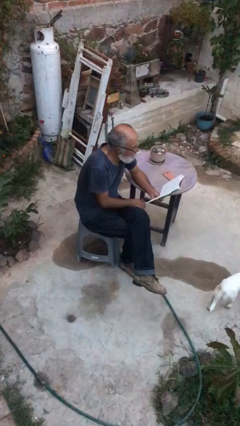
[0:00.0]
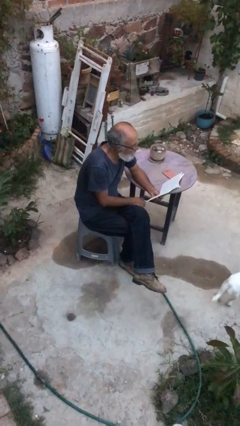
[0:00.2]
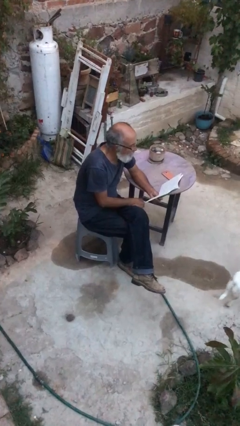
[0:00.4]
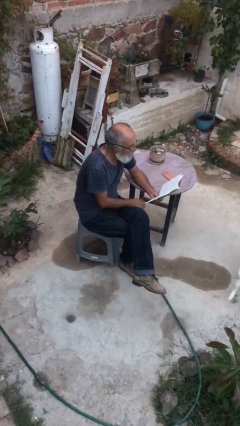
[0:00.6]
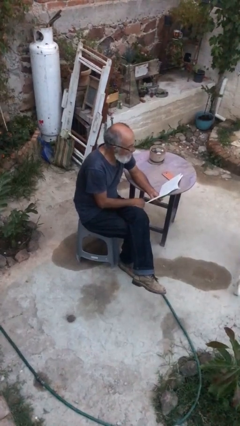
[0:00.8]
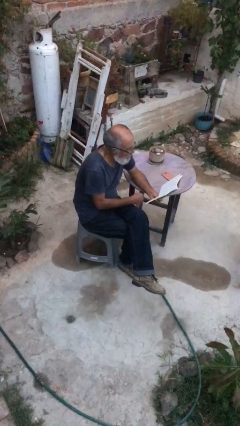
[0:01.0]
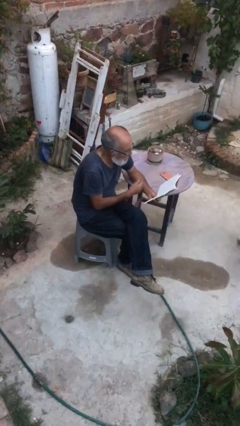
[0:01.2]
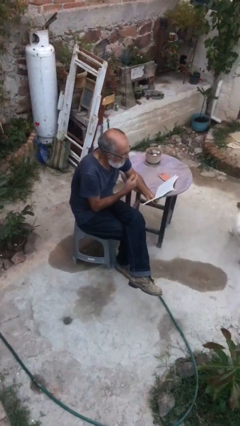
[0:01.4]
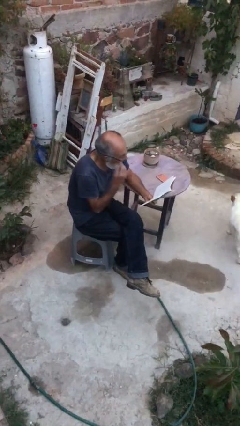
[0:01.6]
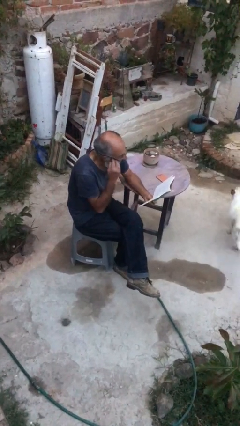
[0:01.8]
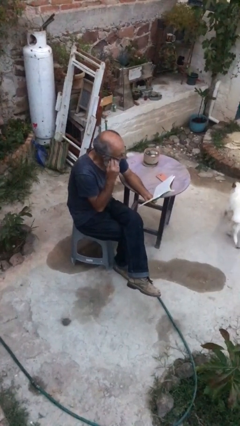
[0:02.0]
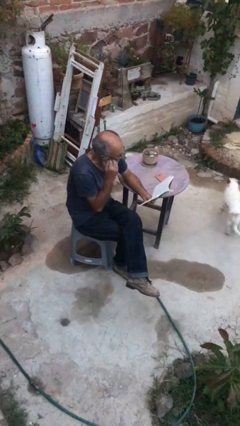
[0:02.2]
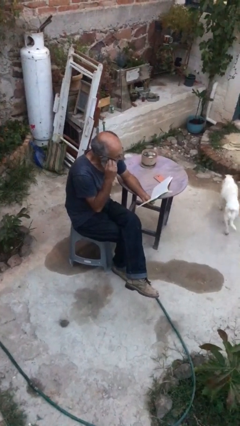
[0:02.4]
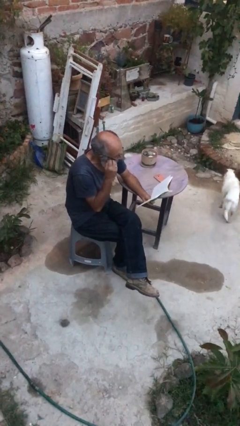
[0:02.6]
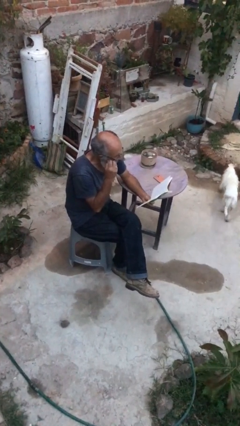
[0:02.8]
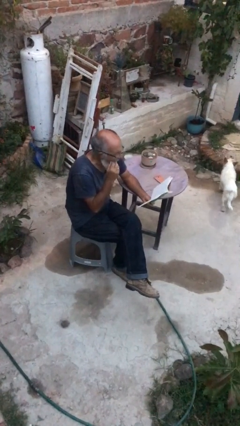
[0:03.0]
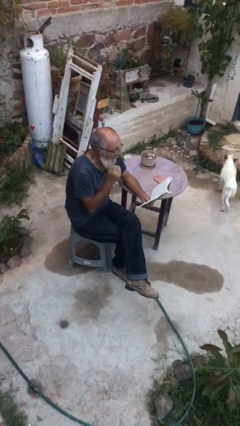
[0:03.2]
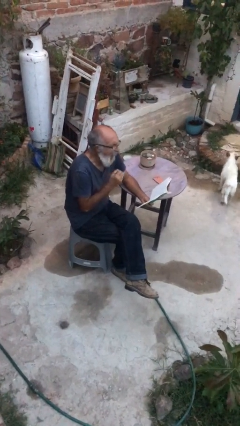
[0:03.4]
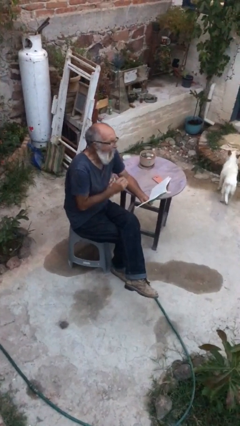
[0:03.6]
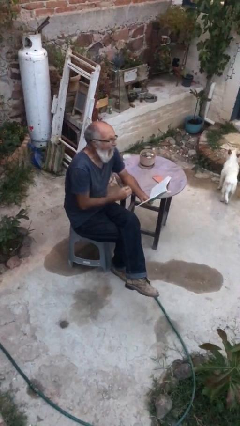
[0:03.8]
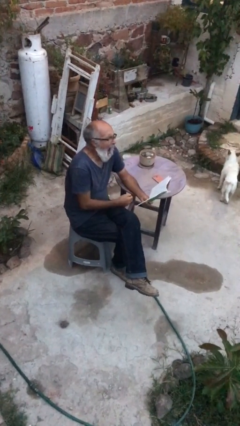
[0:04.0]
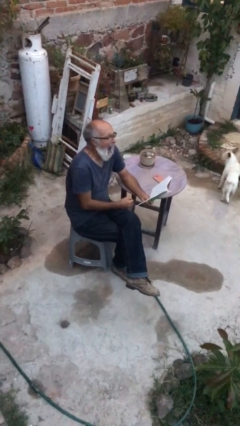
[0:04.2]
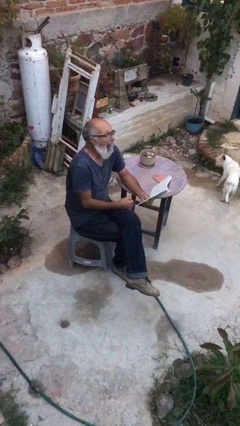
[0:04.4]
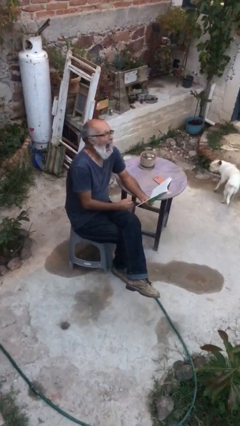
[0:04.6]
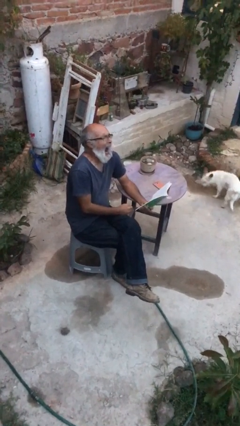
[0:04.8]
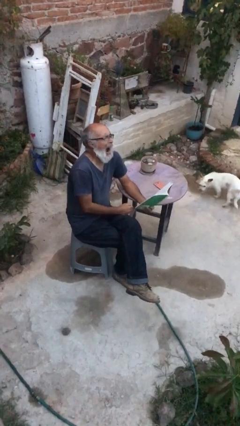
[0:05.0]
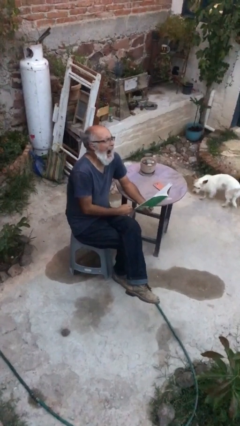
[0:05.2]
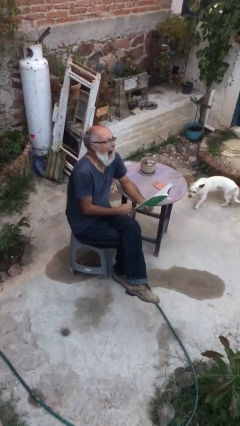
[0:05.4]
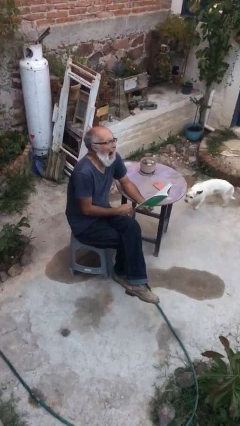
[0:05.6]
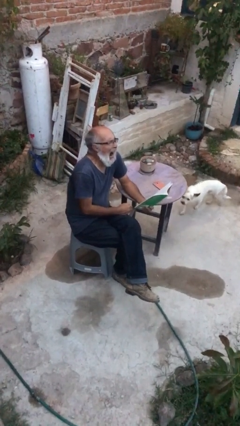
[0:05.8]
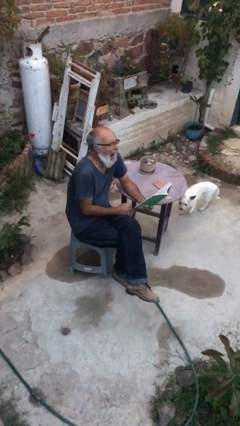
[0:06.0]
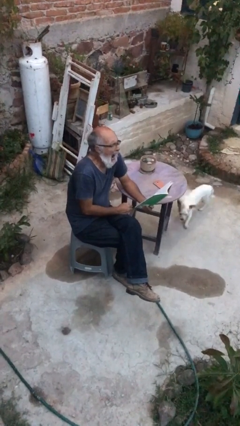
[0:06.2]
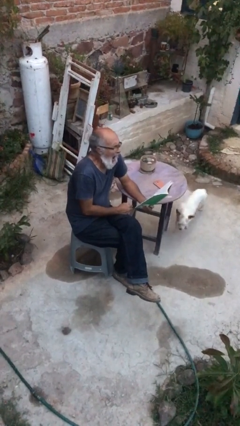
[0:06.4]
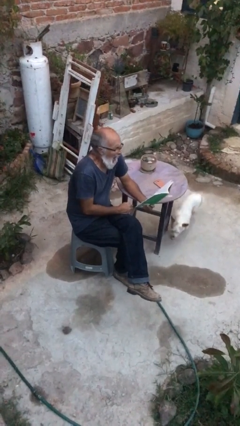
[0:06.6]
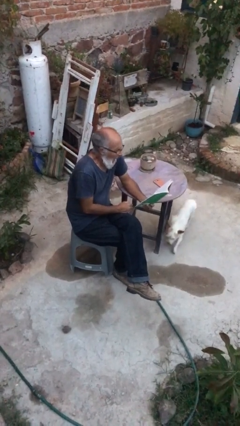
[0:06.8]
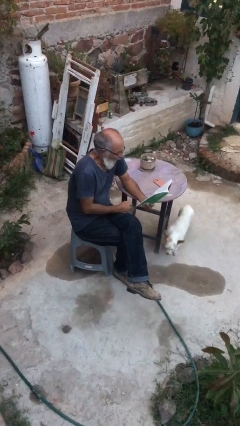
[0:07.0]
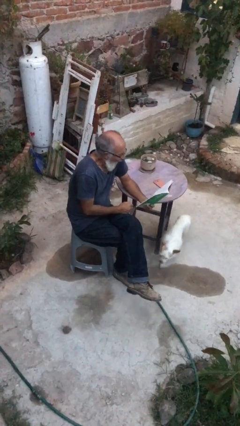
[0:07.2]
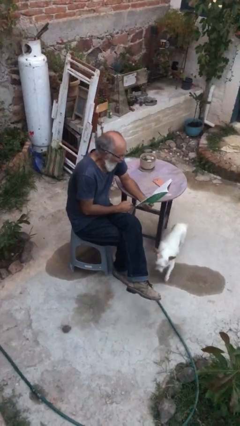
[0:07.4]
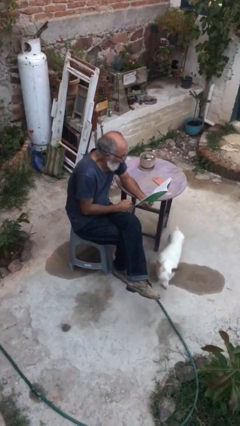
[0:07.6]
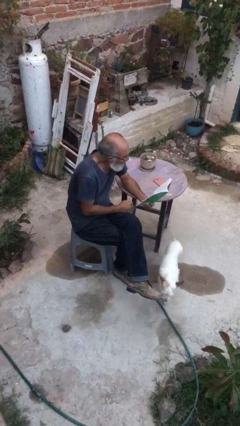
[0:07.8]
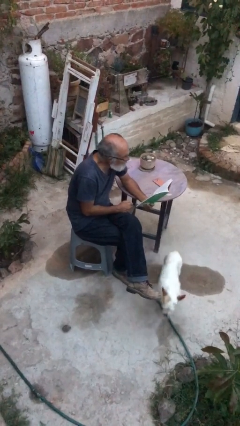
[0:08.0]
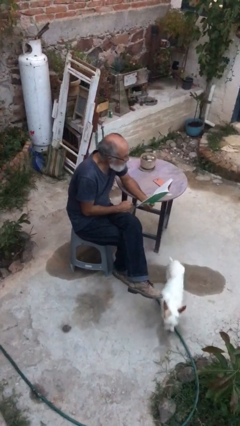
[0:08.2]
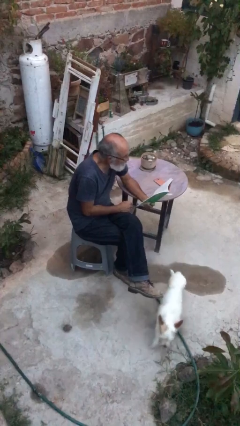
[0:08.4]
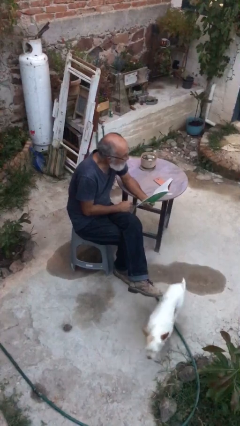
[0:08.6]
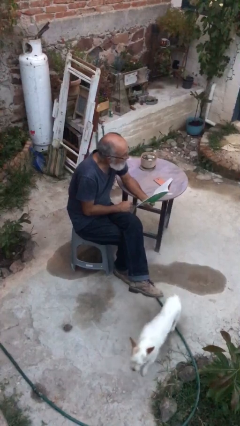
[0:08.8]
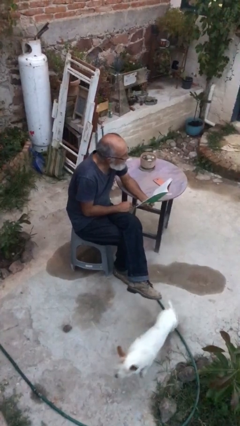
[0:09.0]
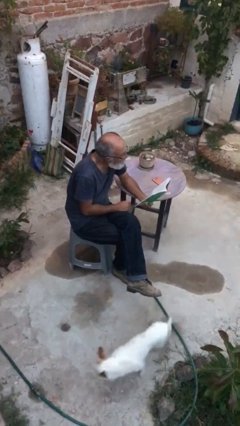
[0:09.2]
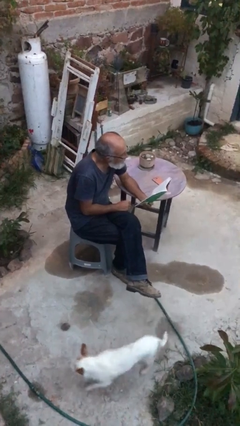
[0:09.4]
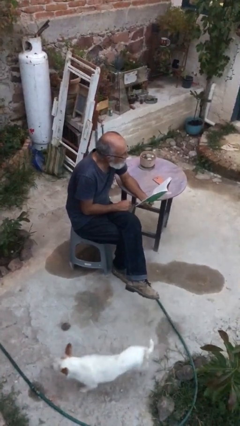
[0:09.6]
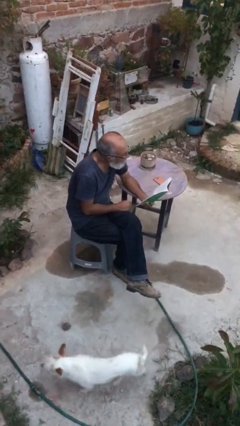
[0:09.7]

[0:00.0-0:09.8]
person reads document

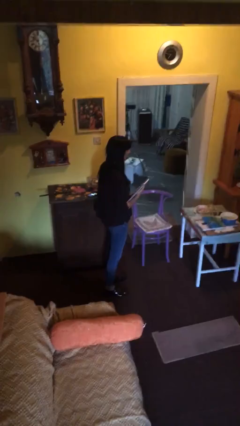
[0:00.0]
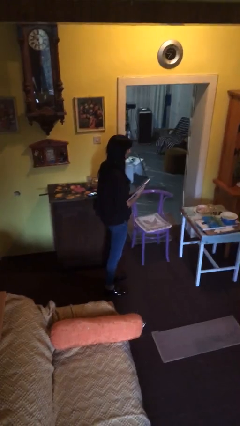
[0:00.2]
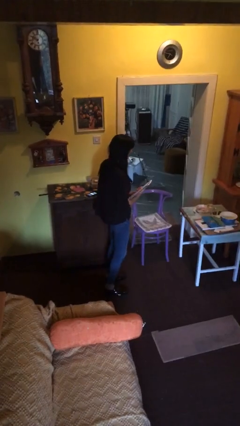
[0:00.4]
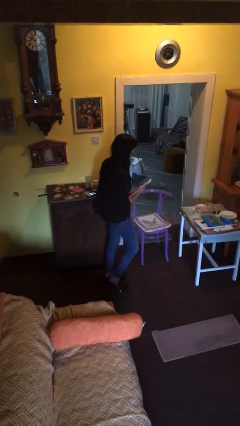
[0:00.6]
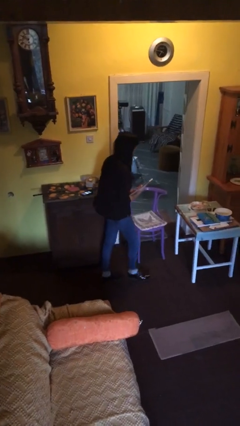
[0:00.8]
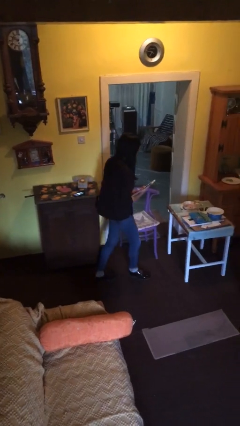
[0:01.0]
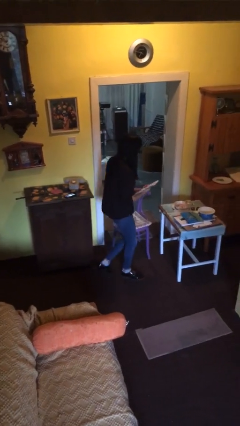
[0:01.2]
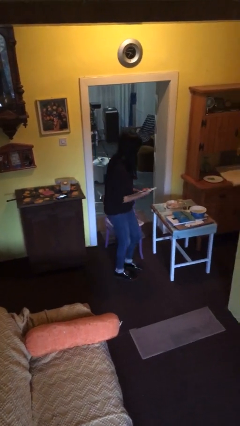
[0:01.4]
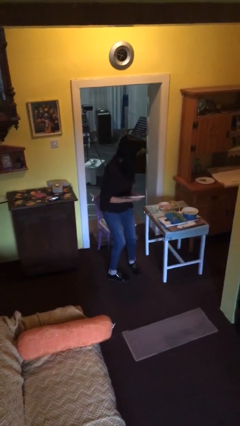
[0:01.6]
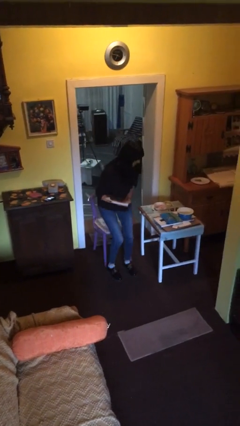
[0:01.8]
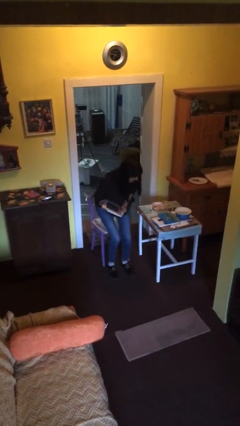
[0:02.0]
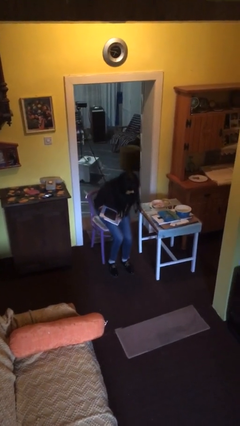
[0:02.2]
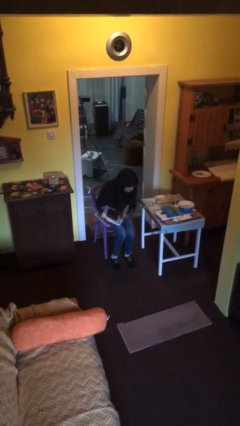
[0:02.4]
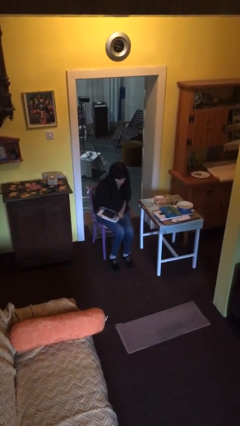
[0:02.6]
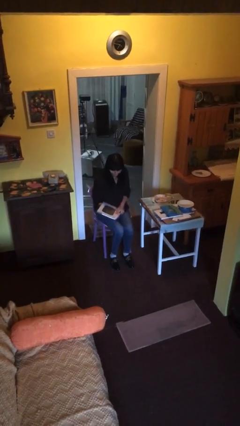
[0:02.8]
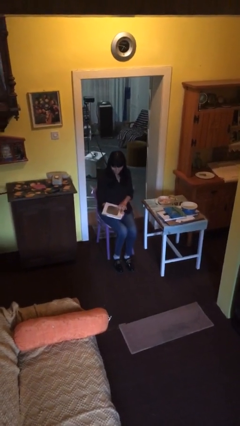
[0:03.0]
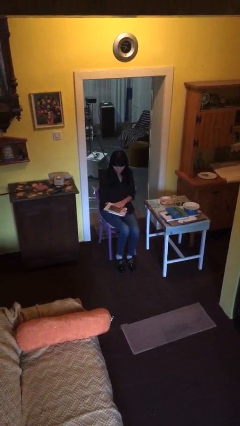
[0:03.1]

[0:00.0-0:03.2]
person sits down

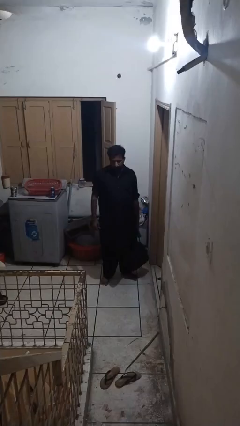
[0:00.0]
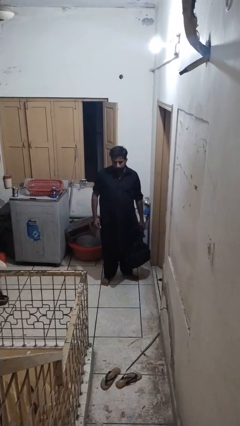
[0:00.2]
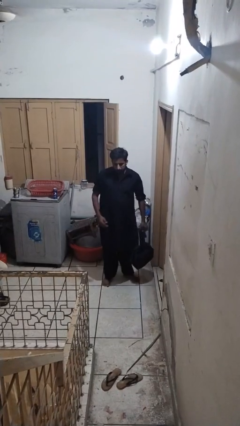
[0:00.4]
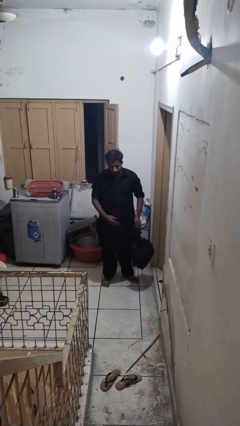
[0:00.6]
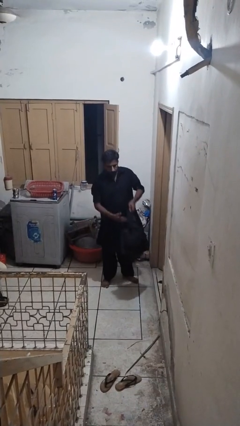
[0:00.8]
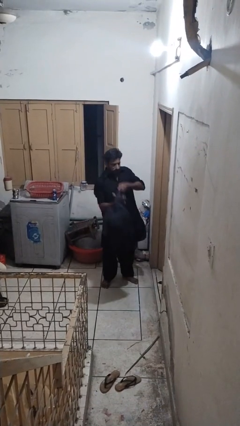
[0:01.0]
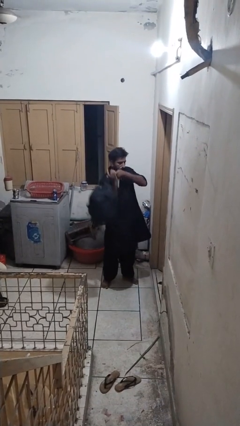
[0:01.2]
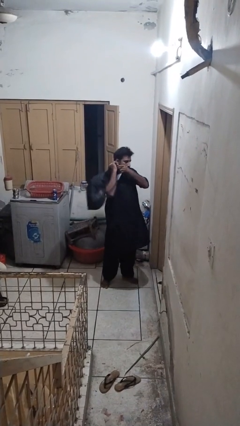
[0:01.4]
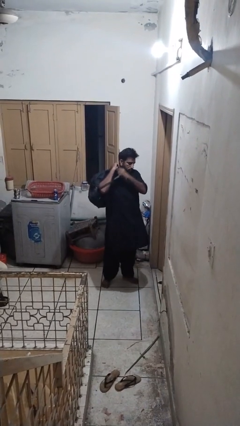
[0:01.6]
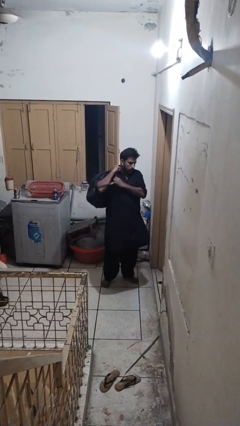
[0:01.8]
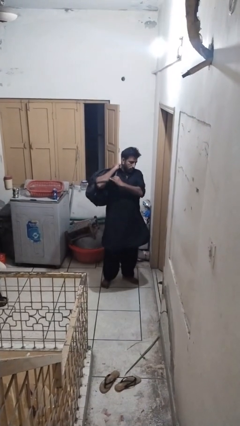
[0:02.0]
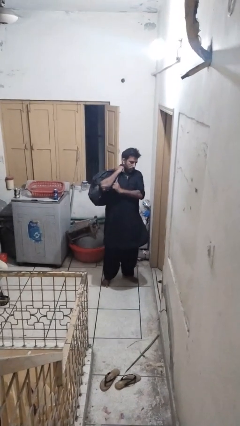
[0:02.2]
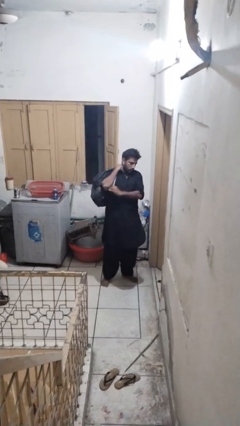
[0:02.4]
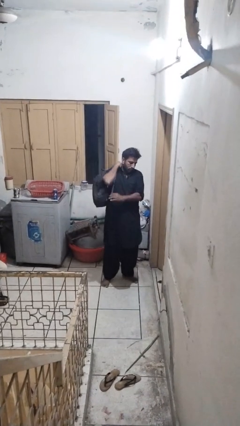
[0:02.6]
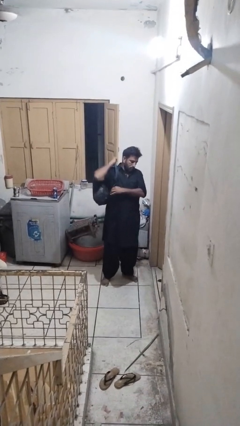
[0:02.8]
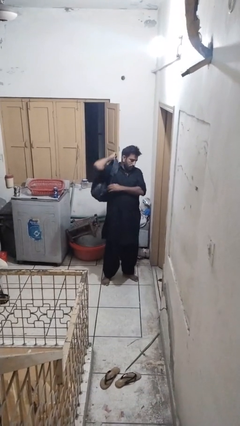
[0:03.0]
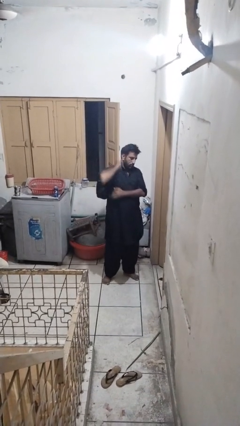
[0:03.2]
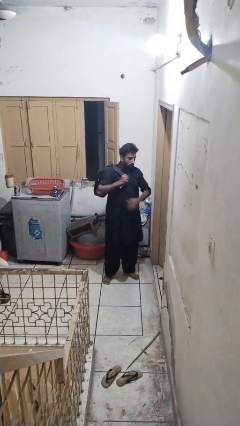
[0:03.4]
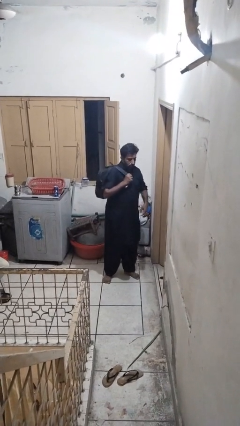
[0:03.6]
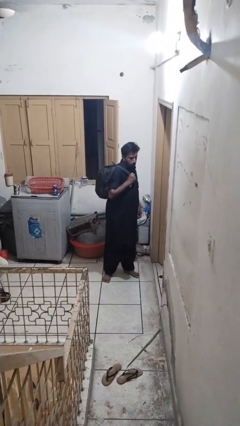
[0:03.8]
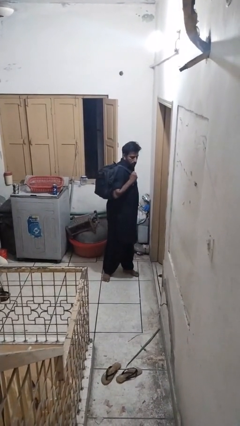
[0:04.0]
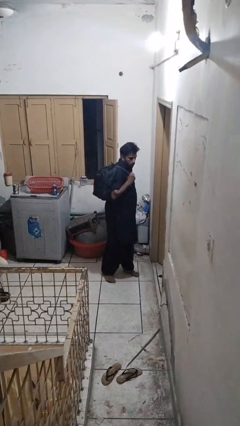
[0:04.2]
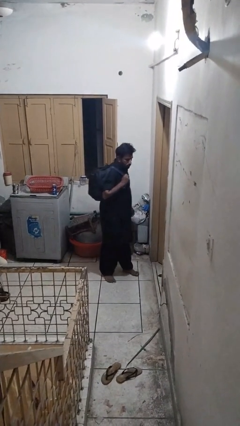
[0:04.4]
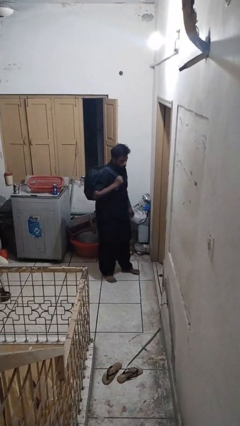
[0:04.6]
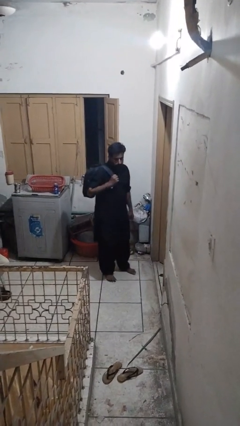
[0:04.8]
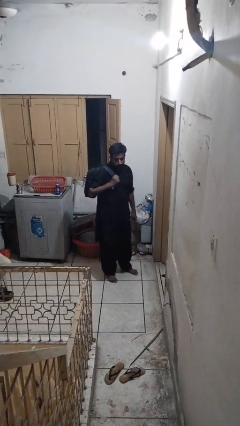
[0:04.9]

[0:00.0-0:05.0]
person puts on backpack

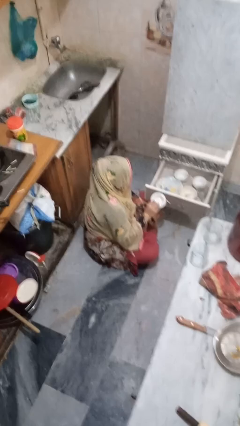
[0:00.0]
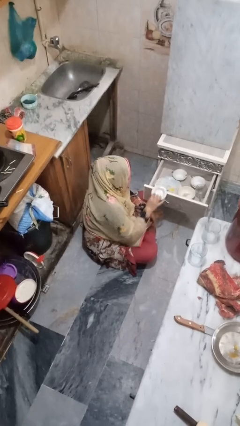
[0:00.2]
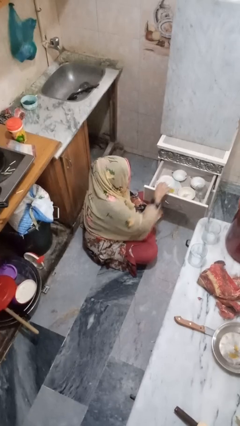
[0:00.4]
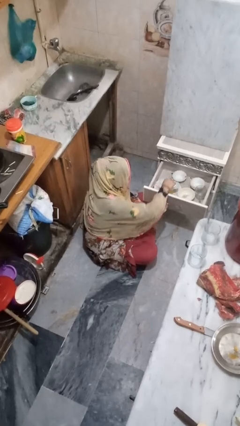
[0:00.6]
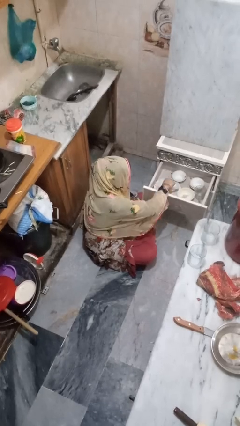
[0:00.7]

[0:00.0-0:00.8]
person puts object into kitchen drawer
